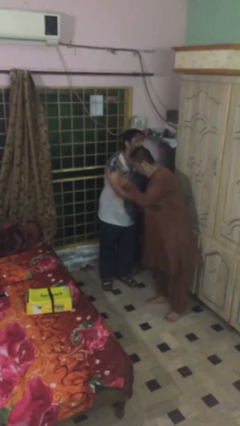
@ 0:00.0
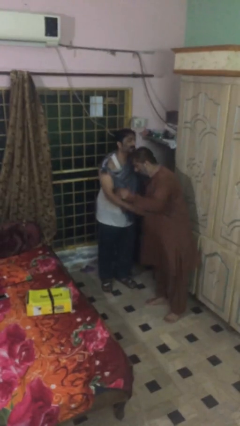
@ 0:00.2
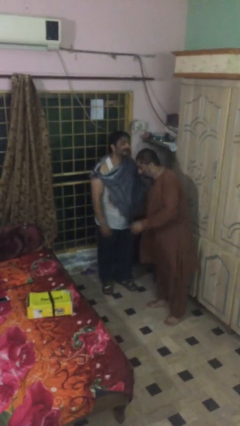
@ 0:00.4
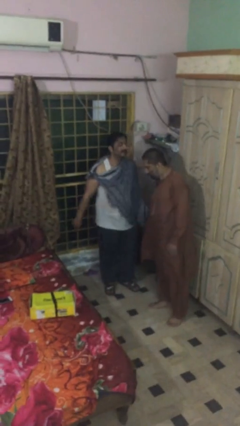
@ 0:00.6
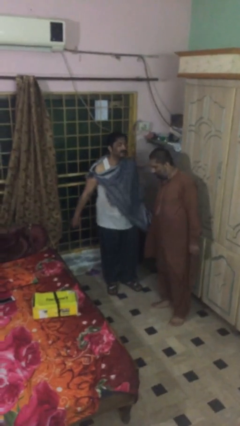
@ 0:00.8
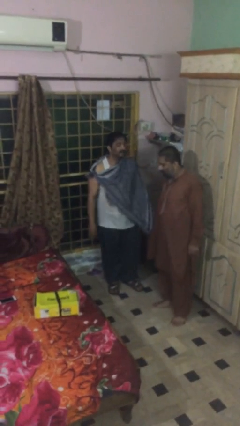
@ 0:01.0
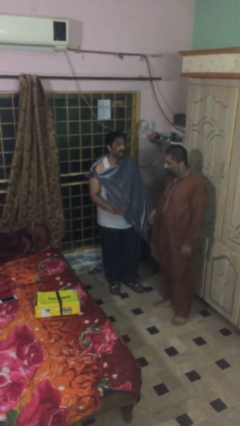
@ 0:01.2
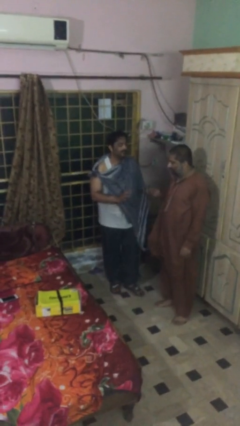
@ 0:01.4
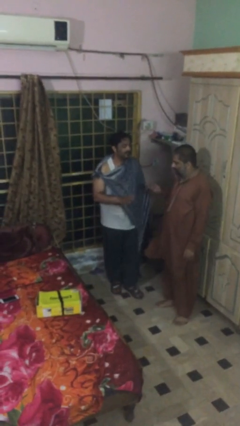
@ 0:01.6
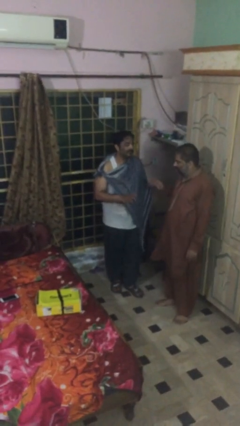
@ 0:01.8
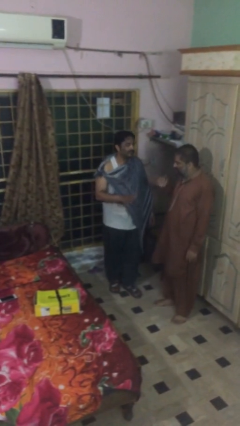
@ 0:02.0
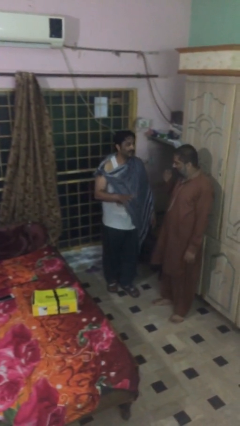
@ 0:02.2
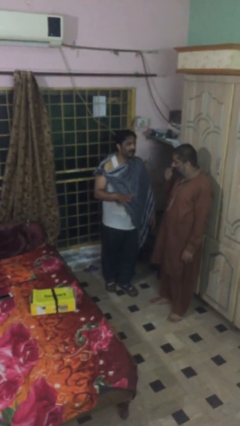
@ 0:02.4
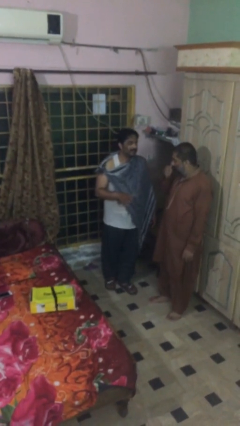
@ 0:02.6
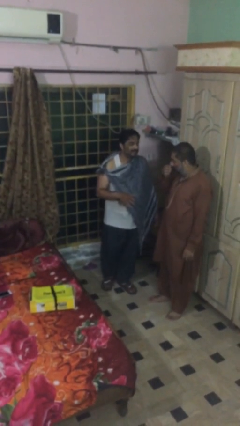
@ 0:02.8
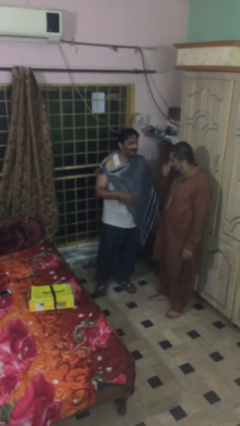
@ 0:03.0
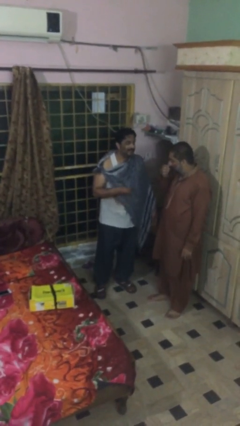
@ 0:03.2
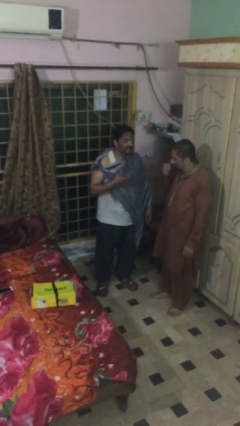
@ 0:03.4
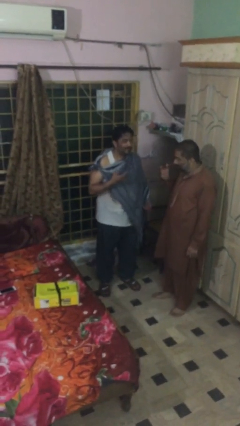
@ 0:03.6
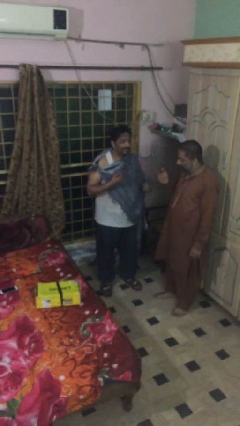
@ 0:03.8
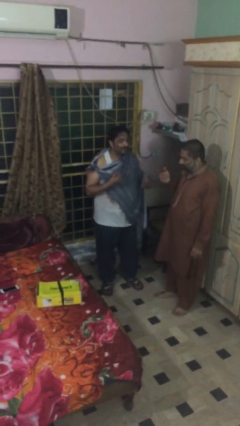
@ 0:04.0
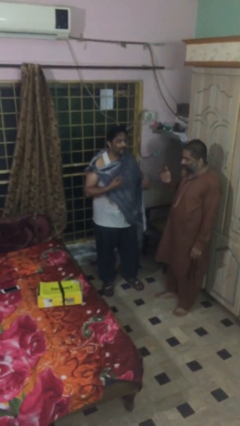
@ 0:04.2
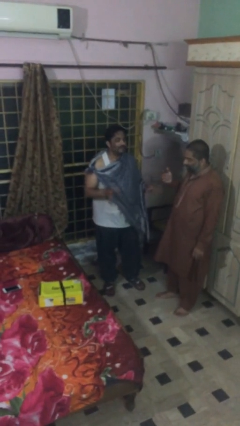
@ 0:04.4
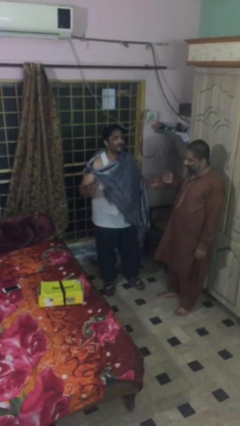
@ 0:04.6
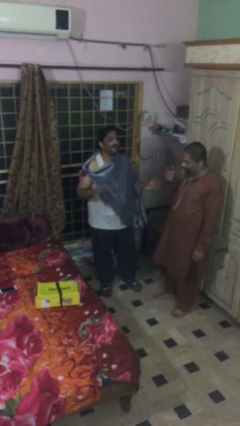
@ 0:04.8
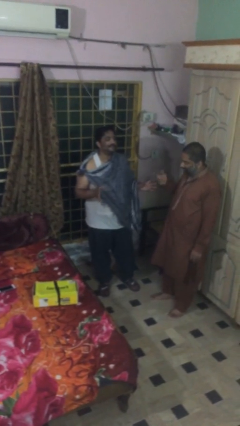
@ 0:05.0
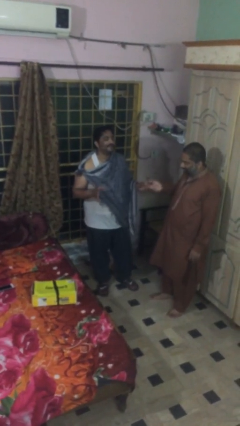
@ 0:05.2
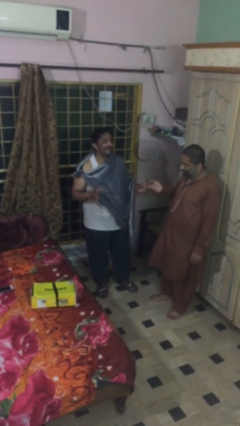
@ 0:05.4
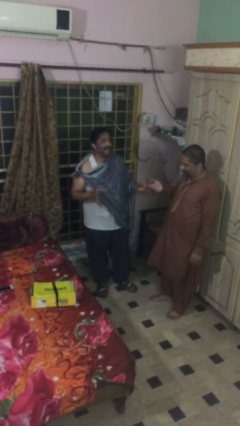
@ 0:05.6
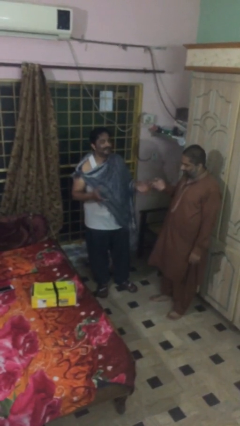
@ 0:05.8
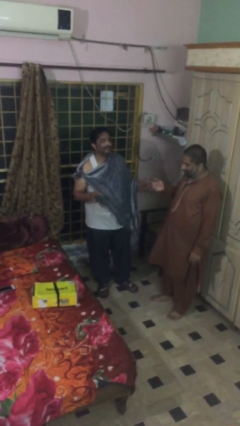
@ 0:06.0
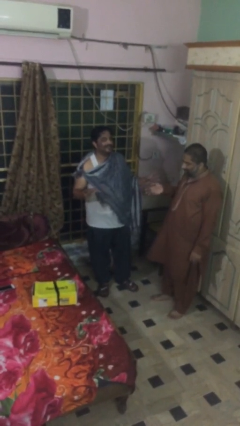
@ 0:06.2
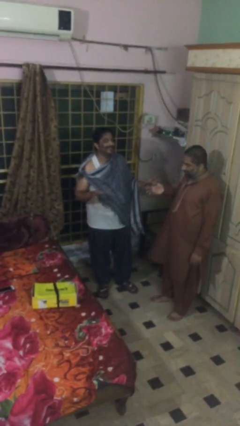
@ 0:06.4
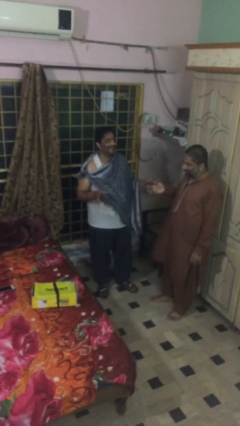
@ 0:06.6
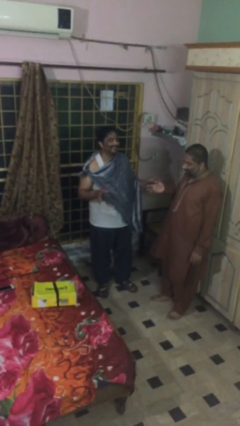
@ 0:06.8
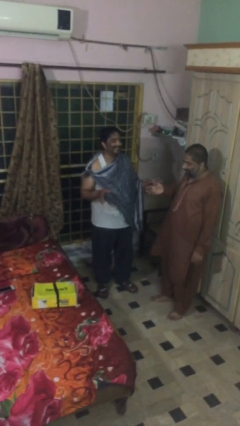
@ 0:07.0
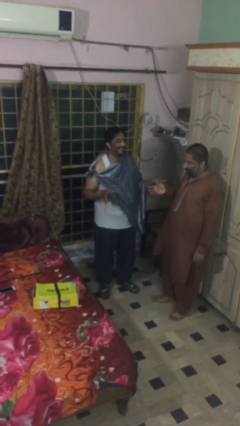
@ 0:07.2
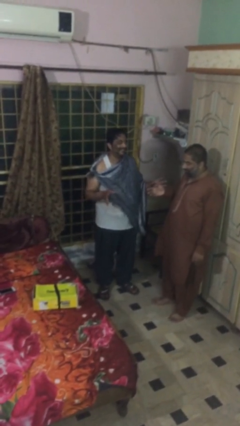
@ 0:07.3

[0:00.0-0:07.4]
person talks to person

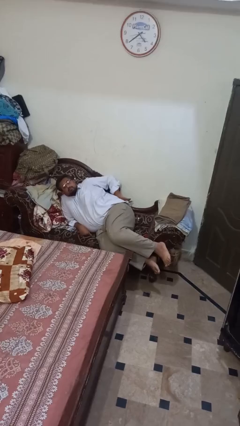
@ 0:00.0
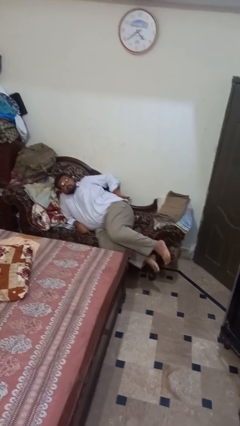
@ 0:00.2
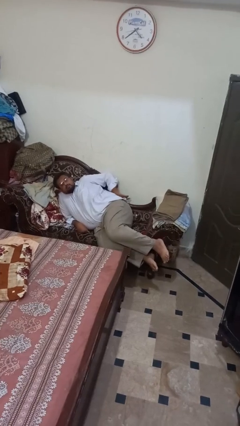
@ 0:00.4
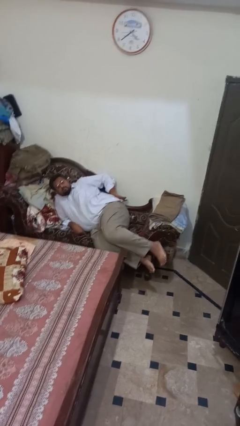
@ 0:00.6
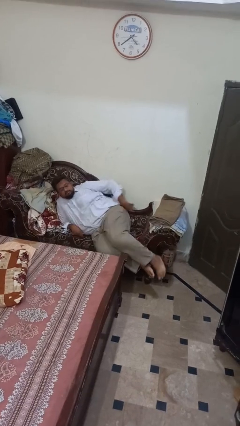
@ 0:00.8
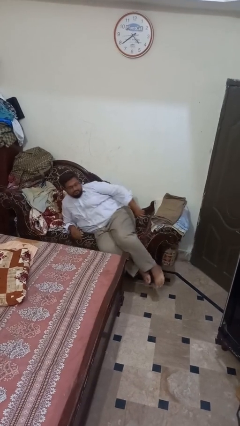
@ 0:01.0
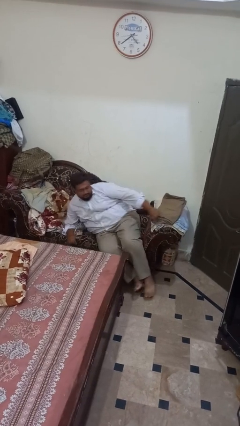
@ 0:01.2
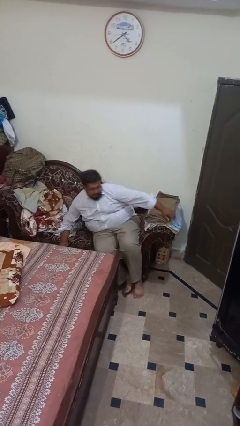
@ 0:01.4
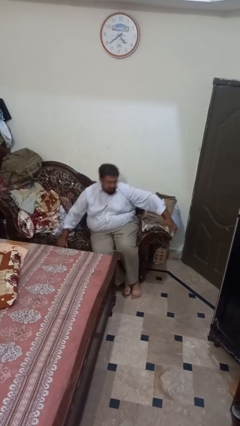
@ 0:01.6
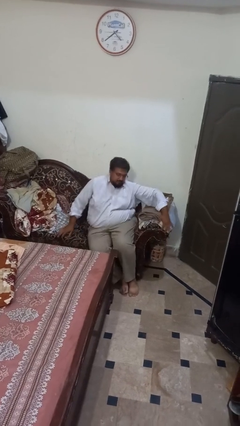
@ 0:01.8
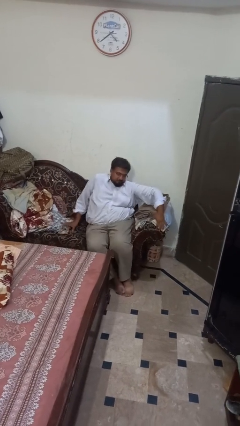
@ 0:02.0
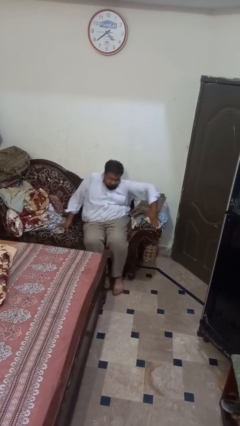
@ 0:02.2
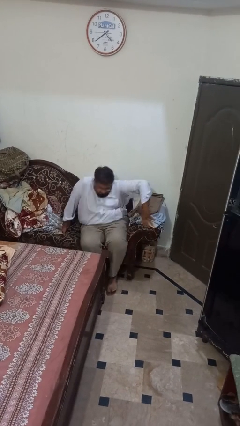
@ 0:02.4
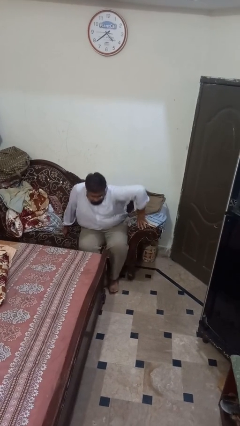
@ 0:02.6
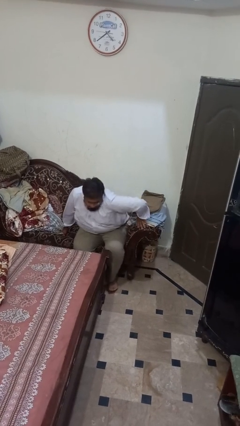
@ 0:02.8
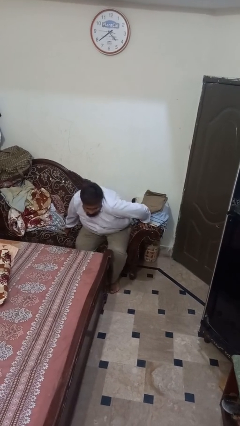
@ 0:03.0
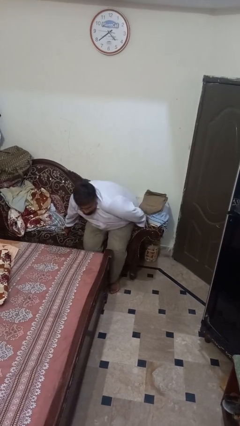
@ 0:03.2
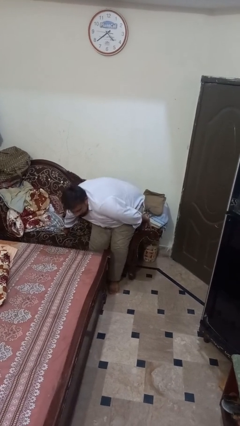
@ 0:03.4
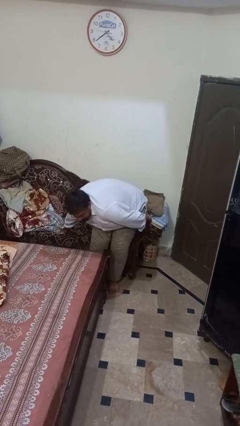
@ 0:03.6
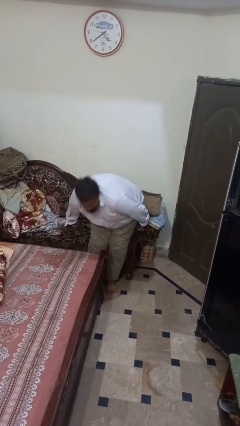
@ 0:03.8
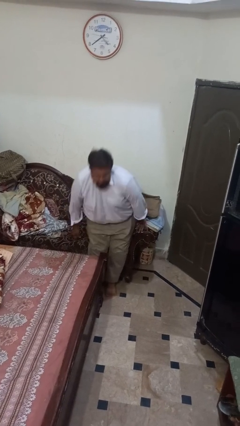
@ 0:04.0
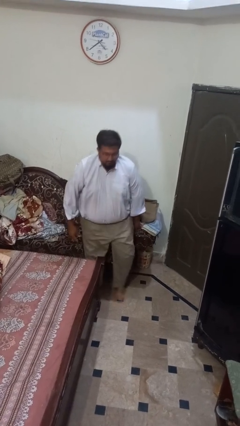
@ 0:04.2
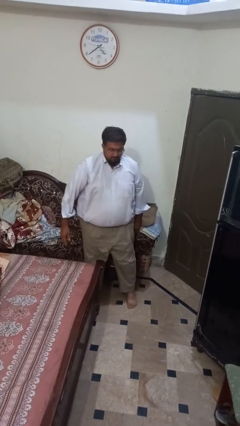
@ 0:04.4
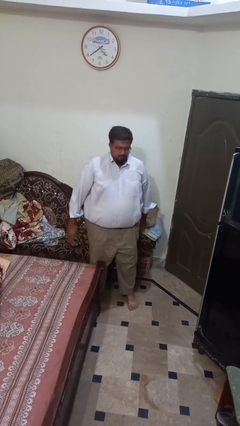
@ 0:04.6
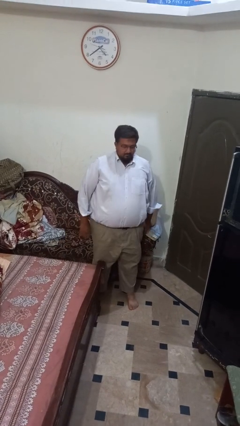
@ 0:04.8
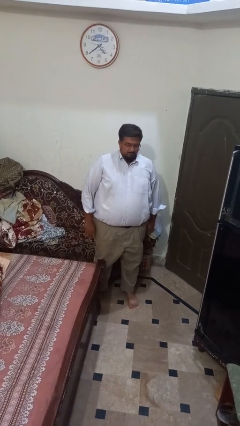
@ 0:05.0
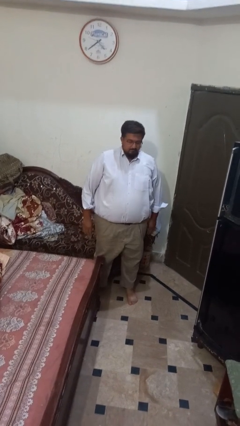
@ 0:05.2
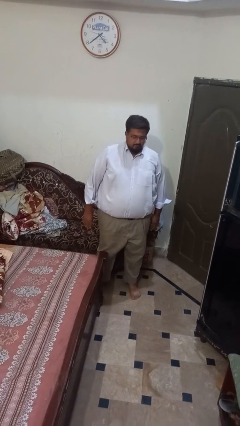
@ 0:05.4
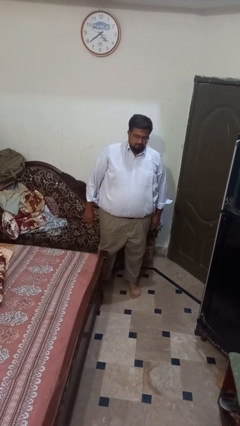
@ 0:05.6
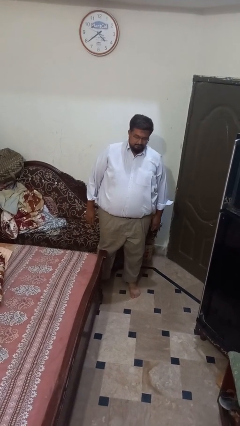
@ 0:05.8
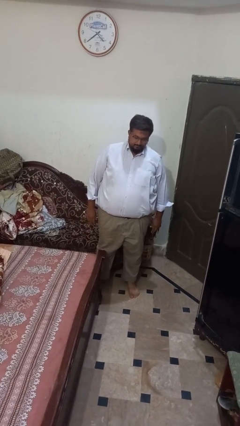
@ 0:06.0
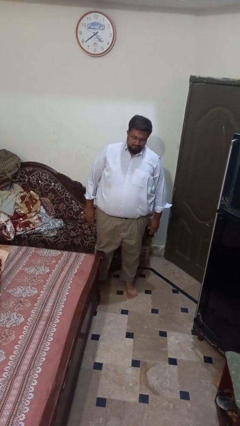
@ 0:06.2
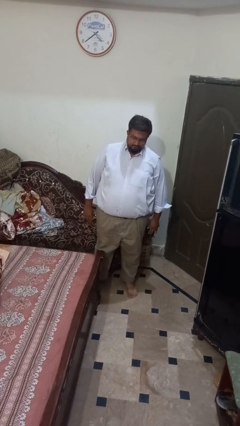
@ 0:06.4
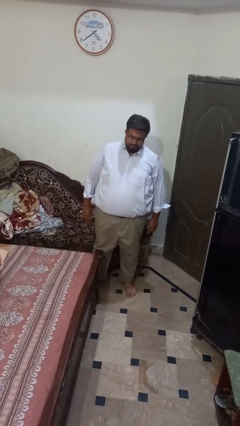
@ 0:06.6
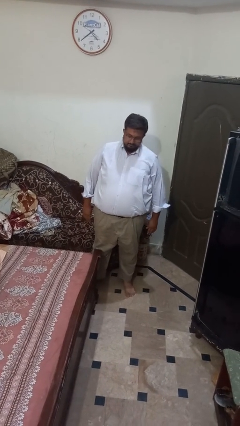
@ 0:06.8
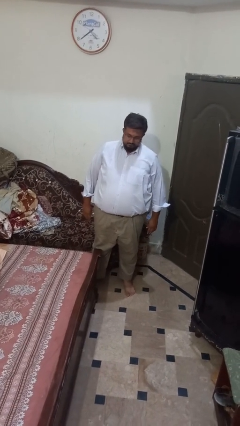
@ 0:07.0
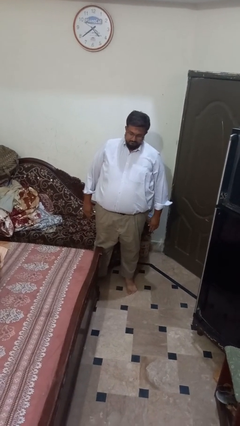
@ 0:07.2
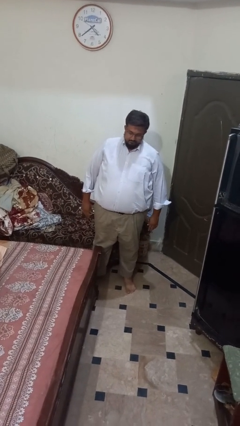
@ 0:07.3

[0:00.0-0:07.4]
person stands up

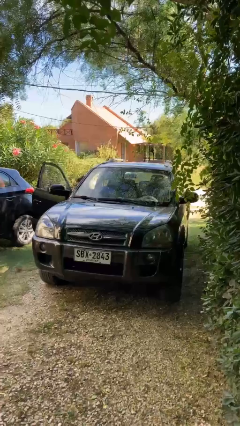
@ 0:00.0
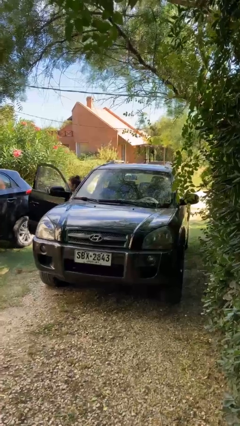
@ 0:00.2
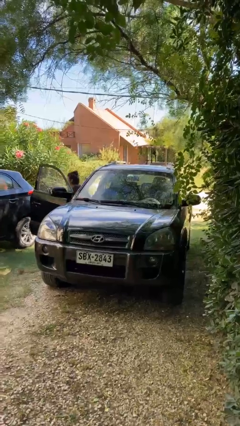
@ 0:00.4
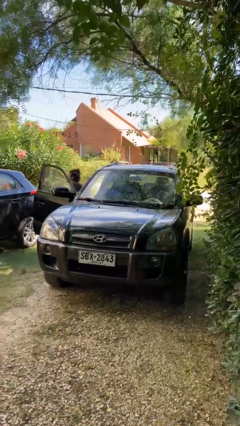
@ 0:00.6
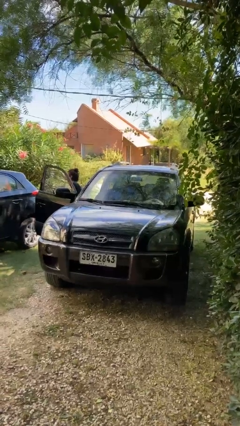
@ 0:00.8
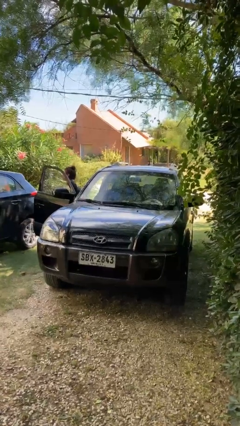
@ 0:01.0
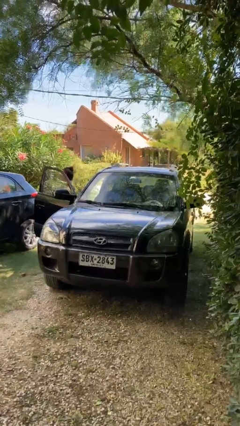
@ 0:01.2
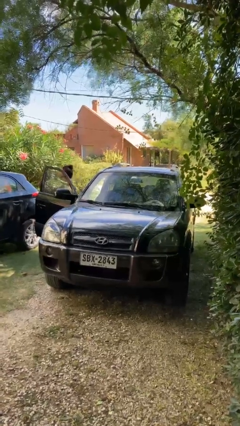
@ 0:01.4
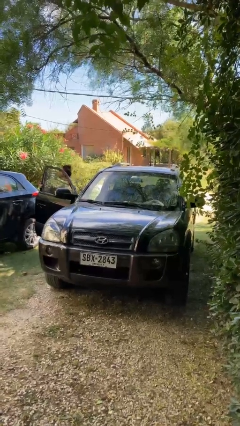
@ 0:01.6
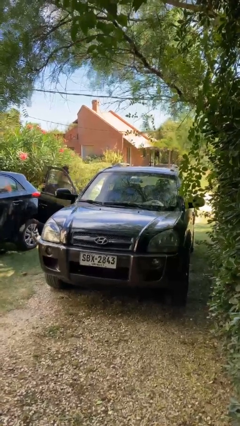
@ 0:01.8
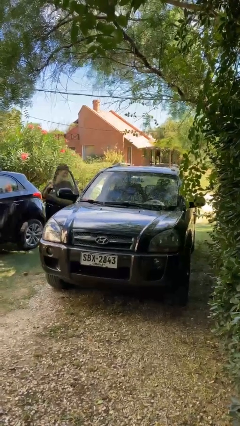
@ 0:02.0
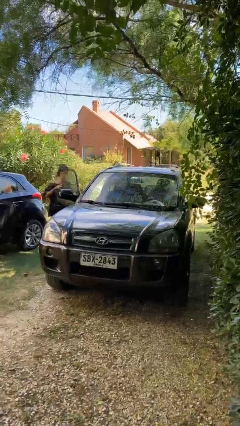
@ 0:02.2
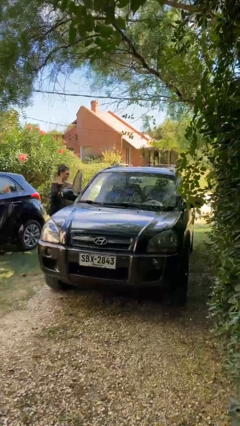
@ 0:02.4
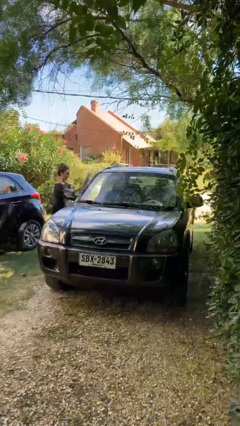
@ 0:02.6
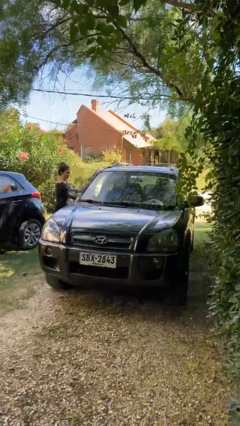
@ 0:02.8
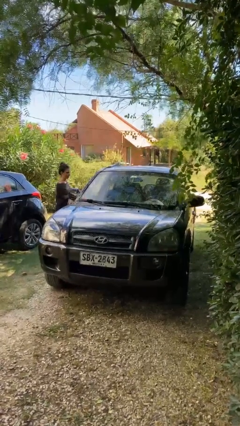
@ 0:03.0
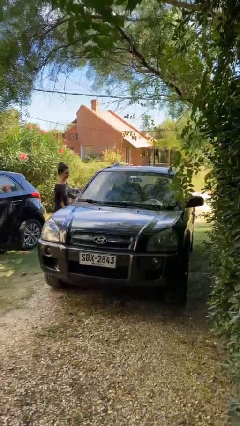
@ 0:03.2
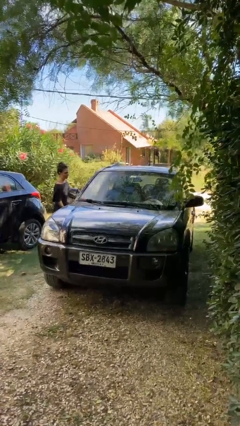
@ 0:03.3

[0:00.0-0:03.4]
car drops off person
